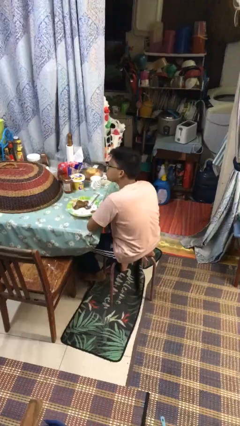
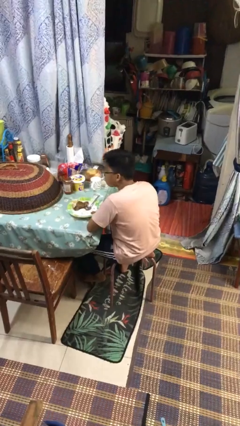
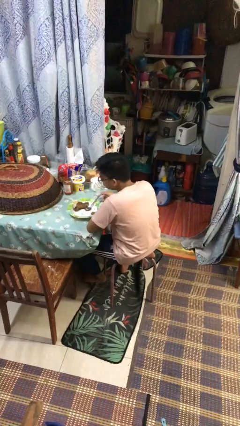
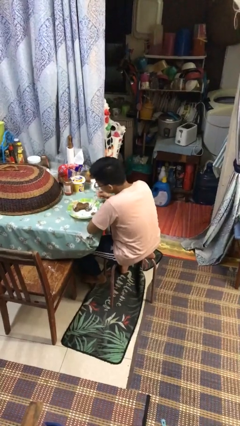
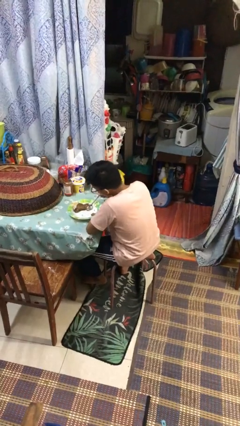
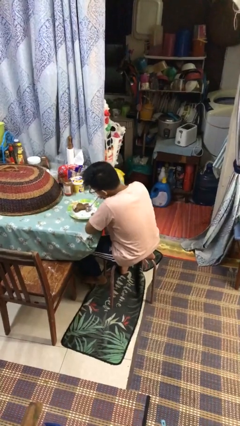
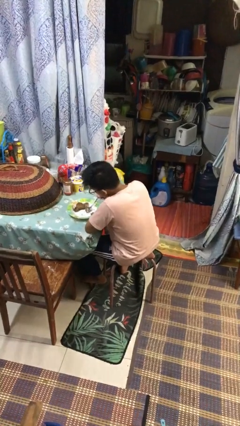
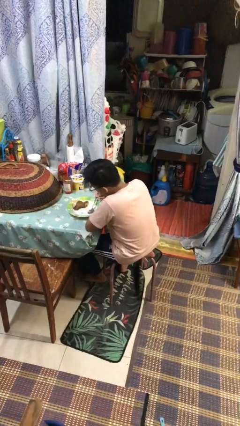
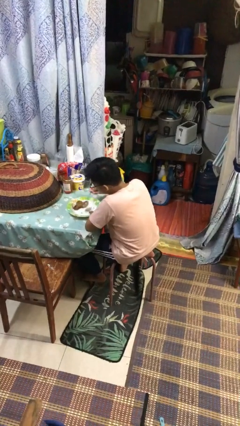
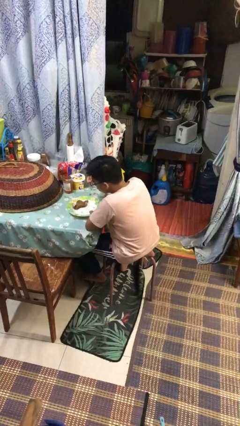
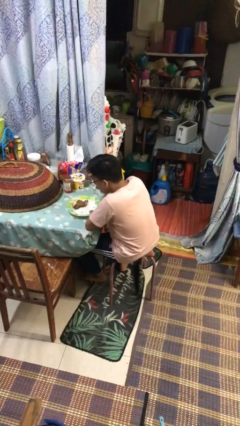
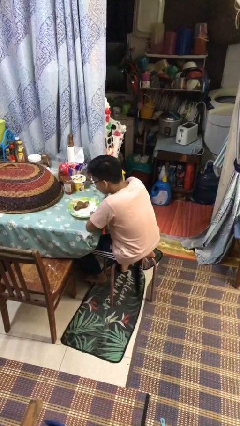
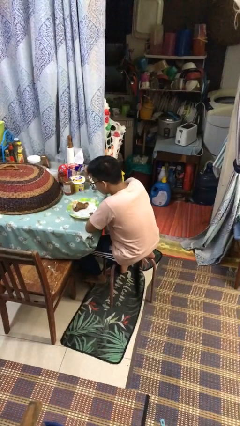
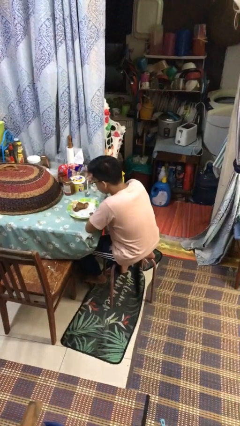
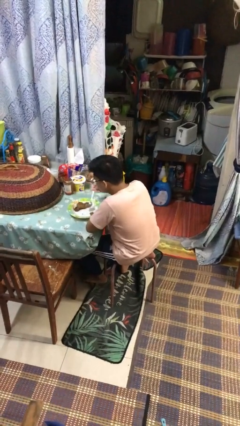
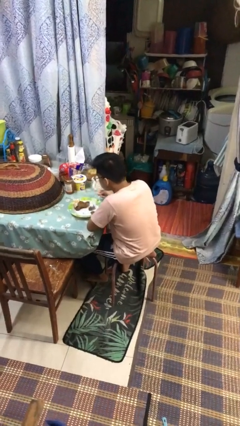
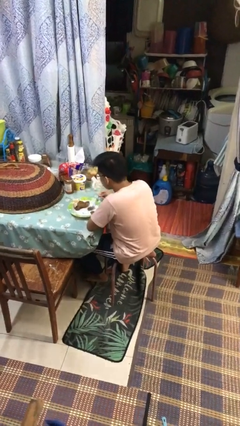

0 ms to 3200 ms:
person eats with utensil

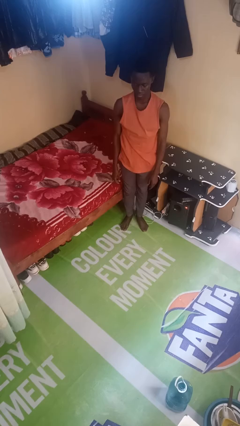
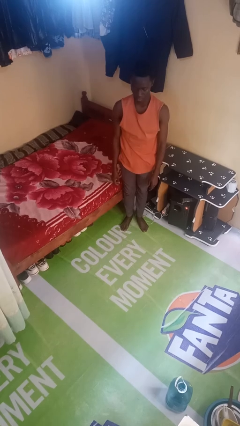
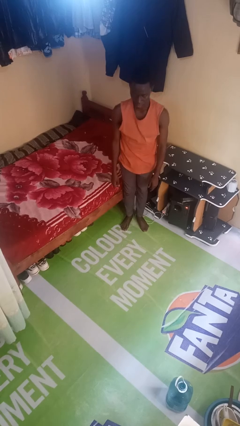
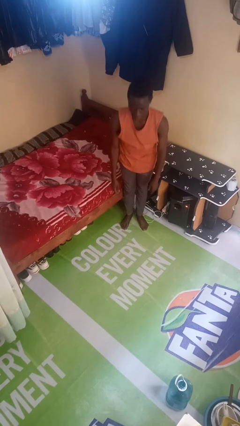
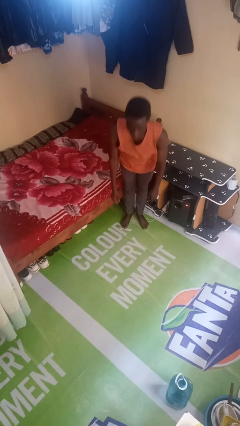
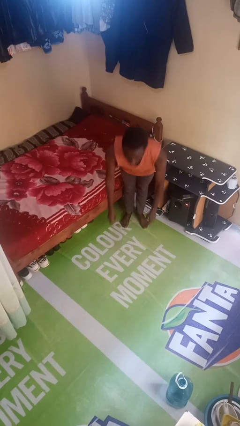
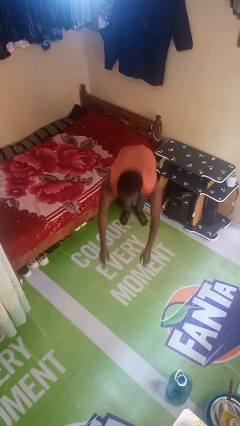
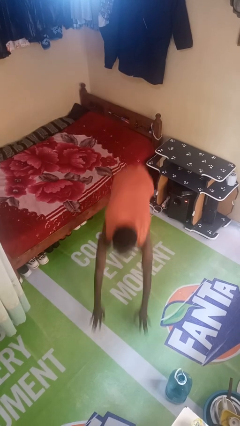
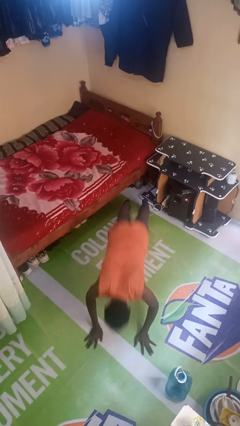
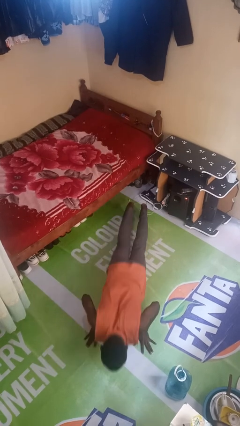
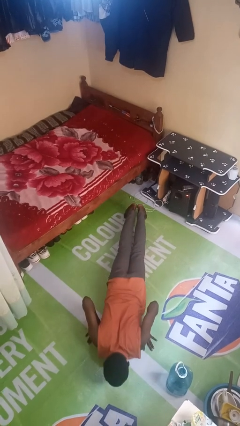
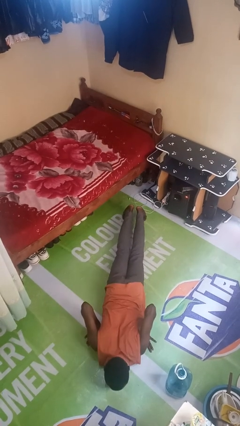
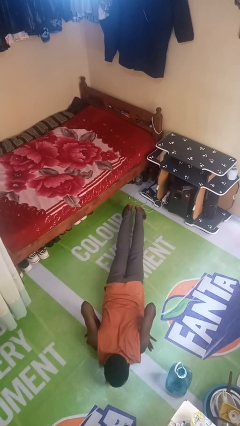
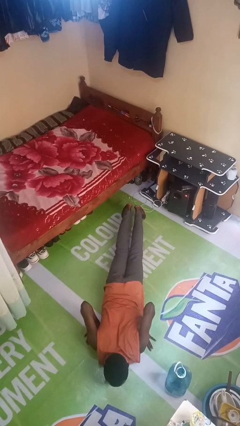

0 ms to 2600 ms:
person falls while standing

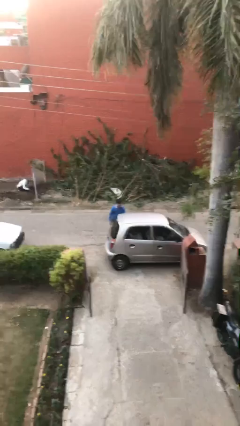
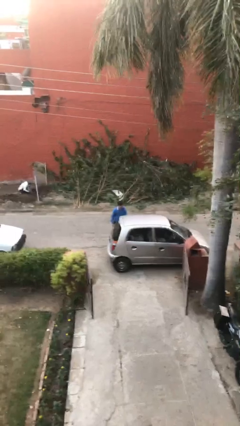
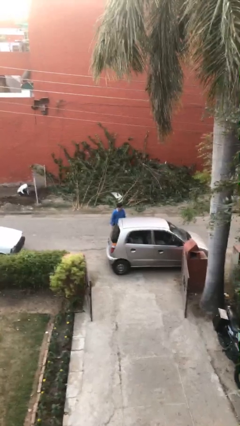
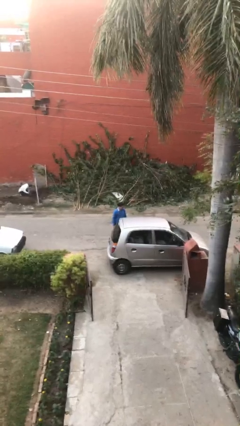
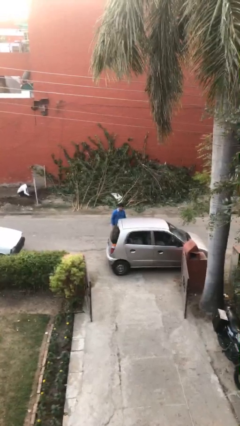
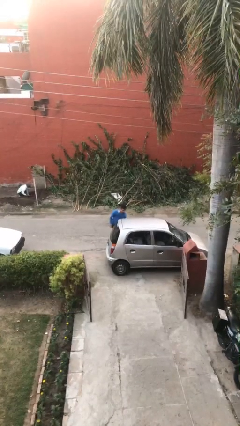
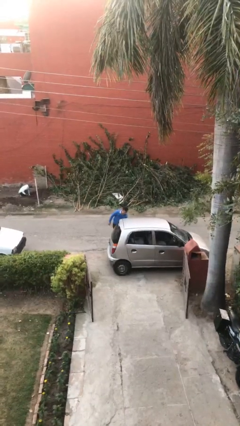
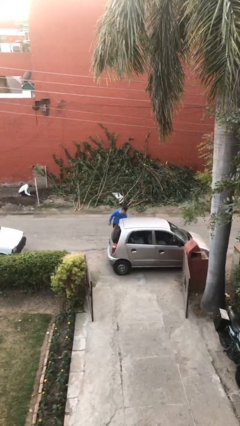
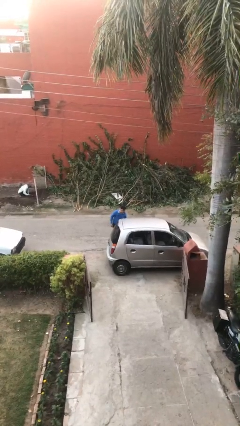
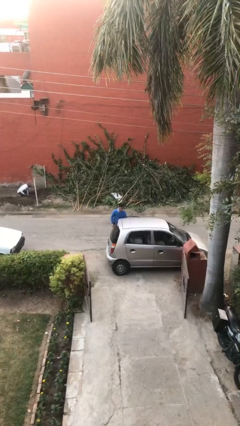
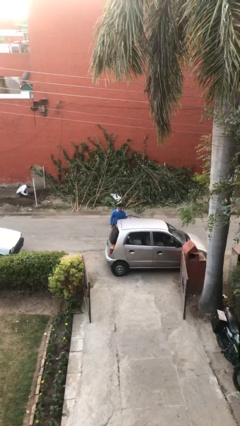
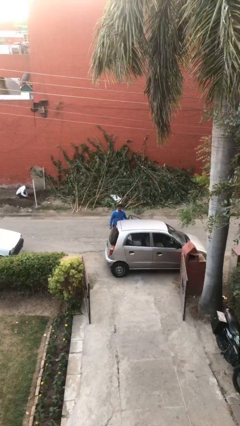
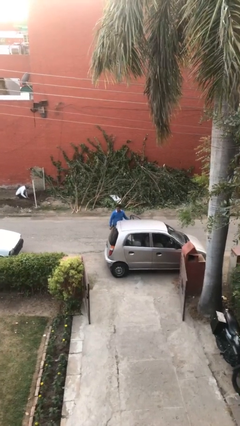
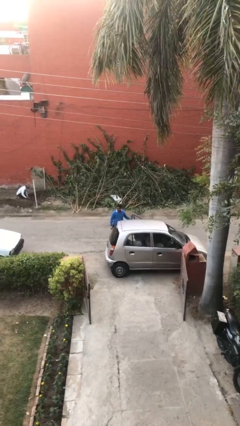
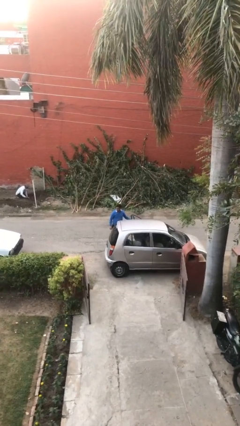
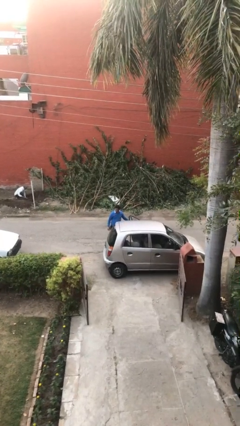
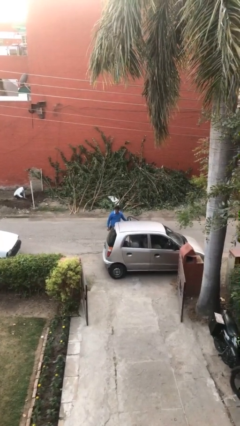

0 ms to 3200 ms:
person opens car door

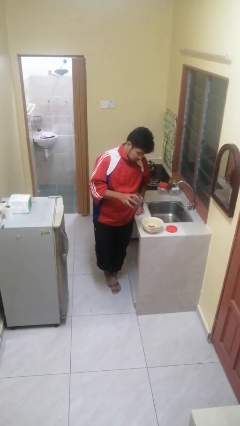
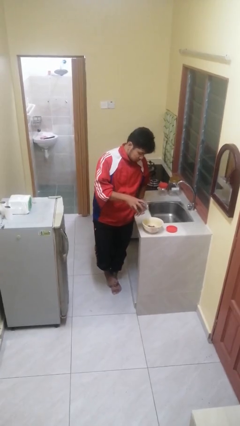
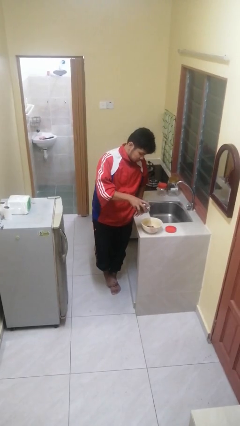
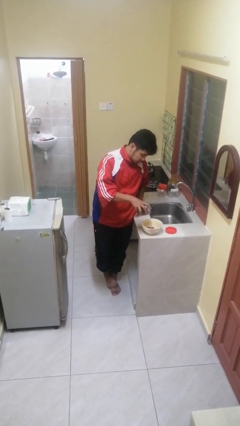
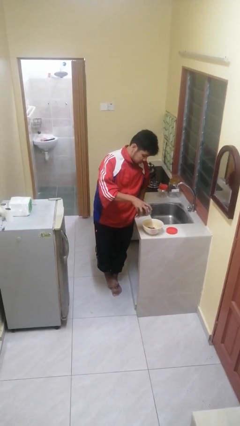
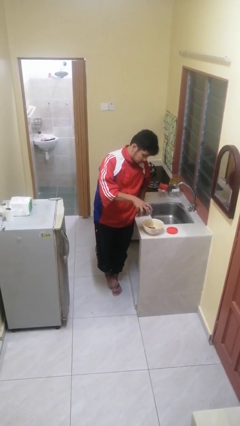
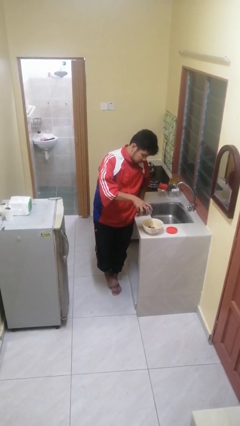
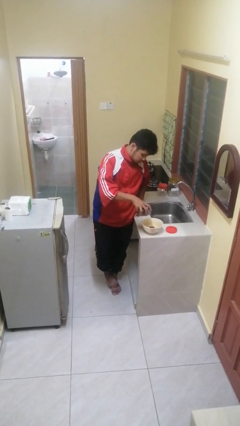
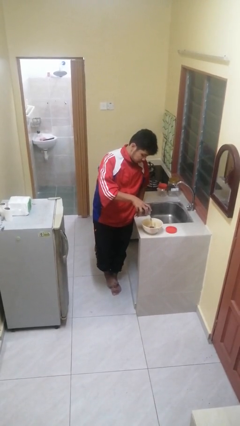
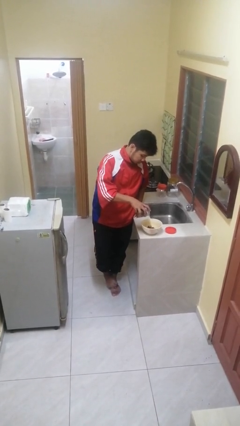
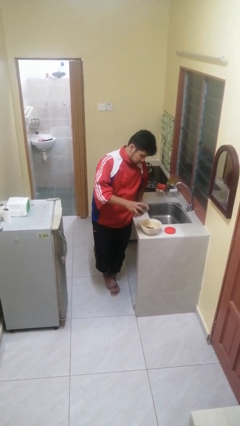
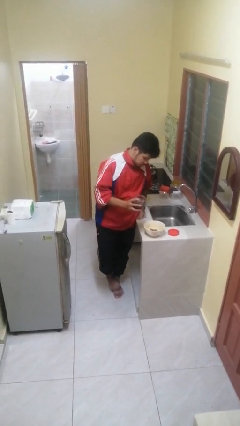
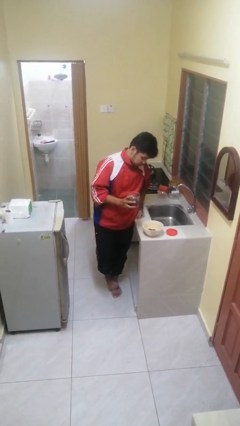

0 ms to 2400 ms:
person pours into bowl

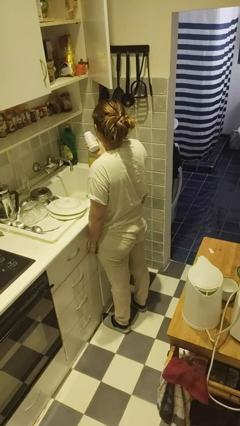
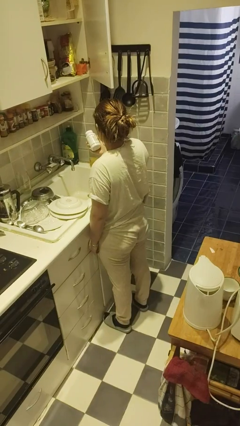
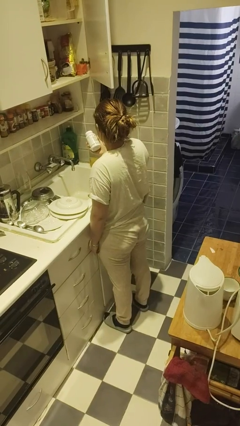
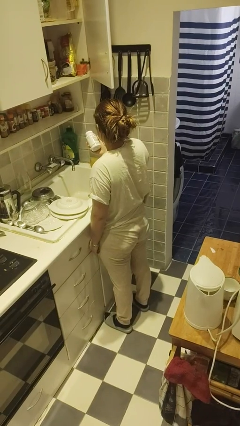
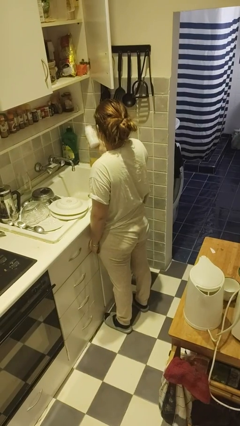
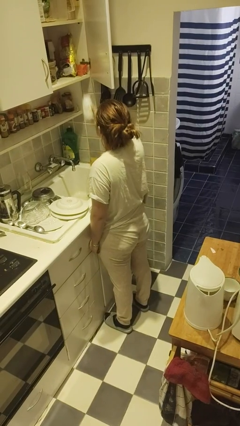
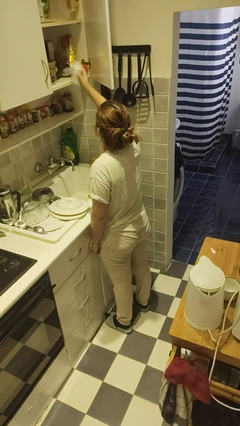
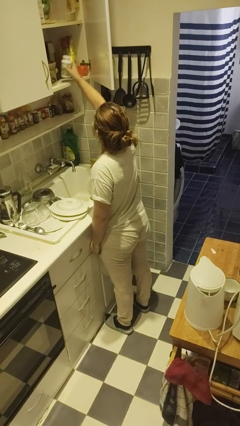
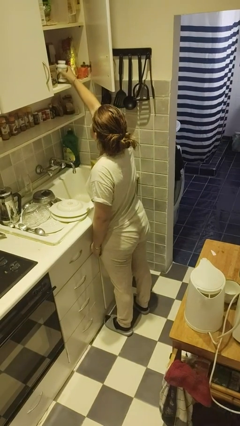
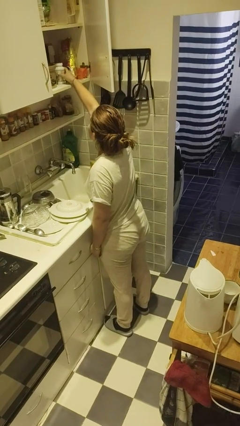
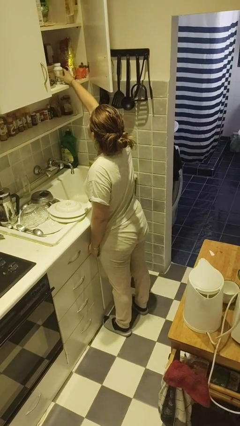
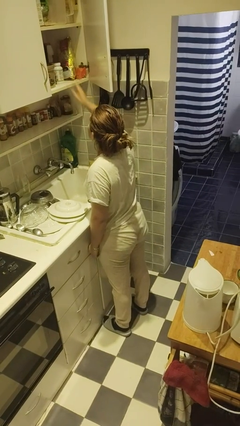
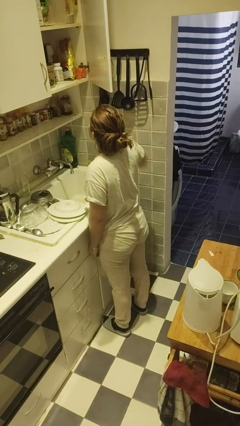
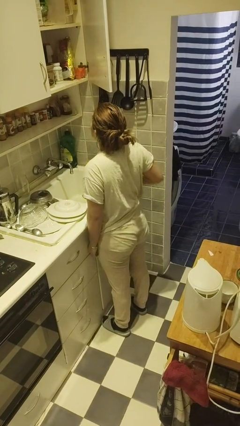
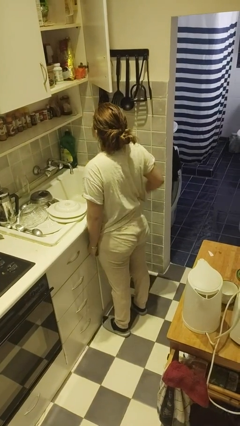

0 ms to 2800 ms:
person puts down object into cabinet

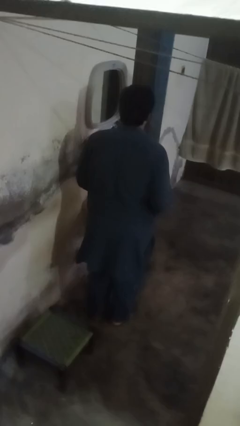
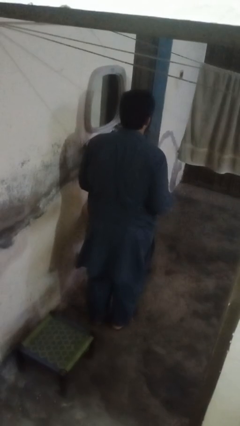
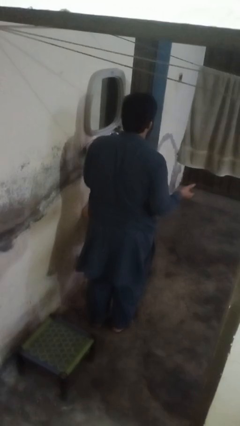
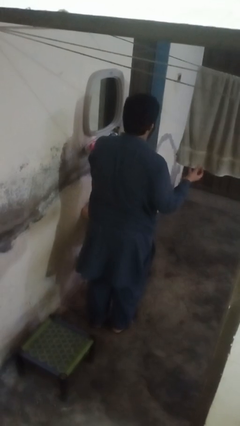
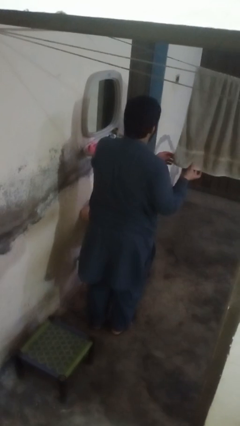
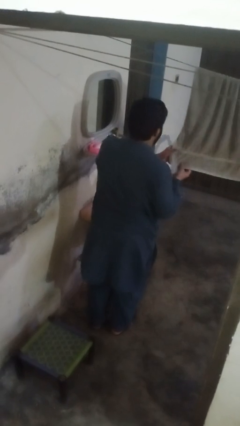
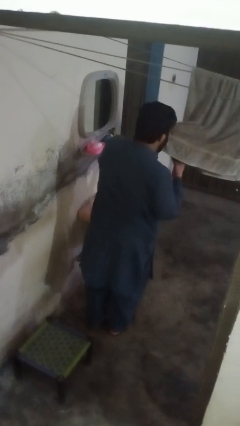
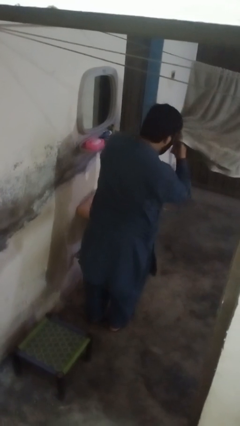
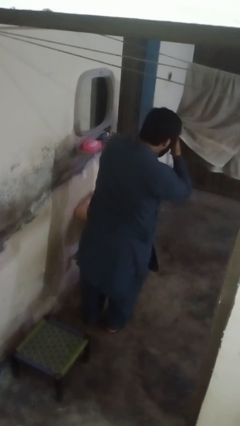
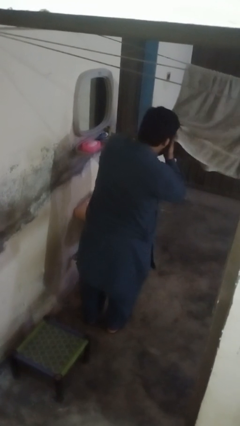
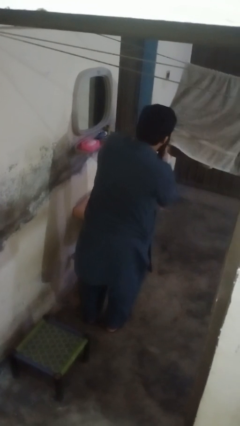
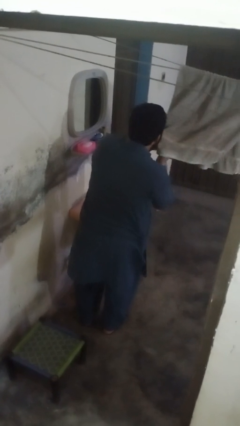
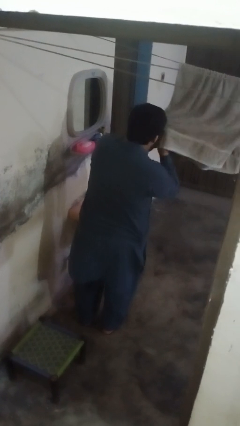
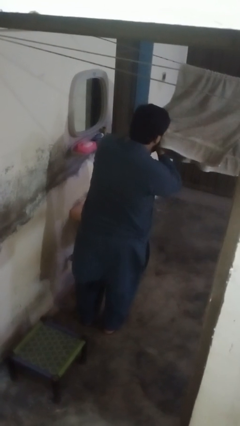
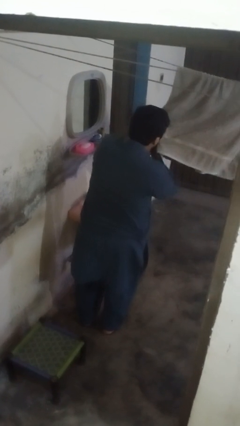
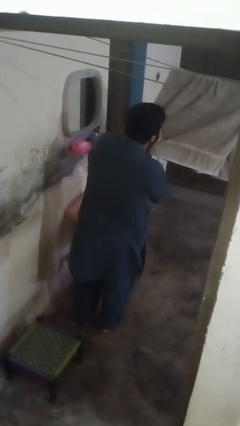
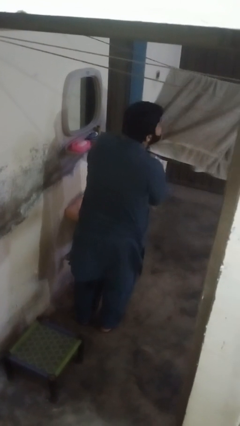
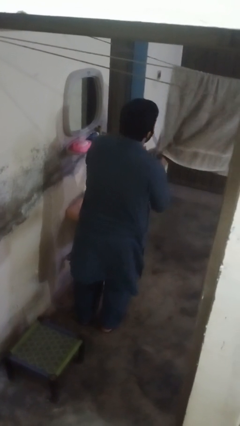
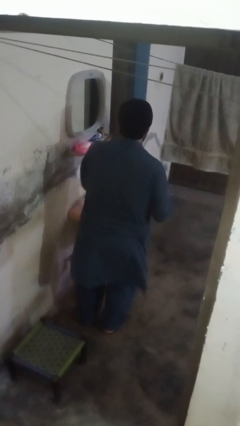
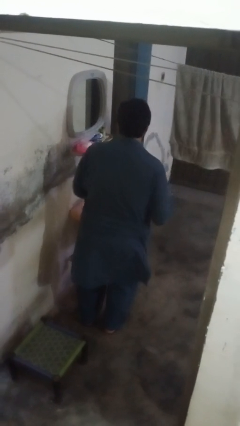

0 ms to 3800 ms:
person dries face with towel
